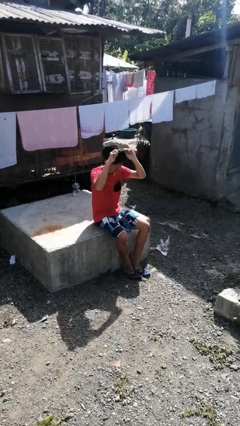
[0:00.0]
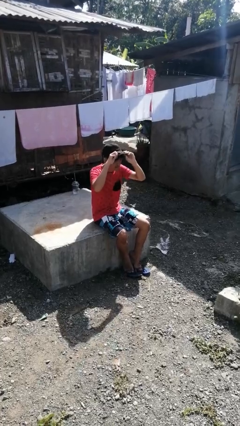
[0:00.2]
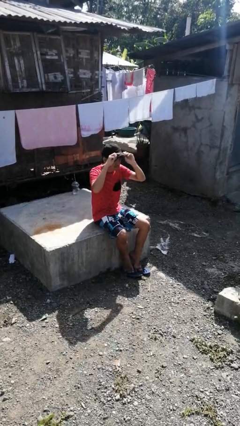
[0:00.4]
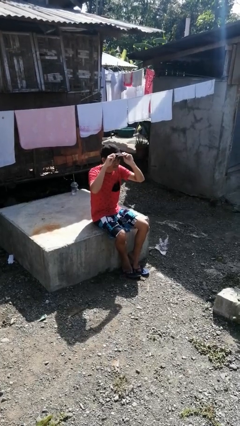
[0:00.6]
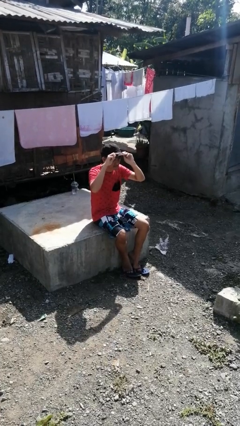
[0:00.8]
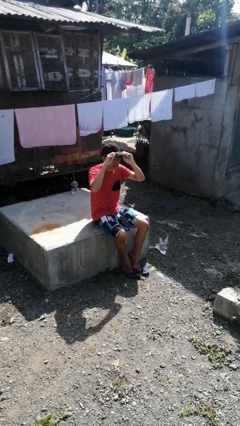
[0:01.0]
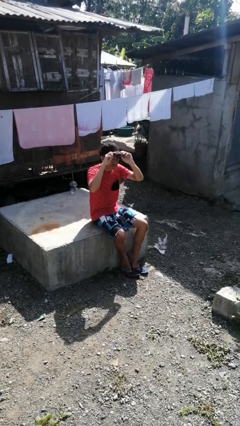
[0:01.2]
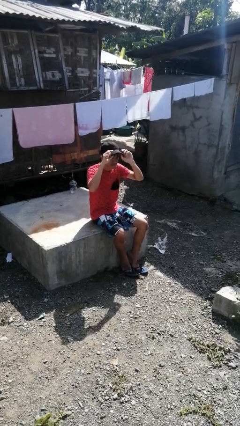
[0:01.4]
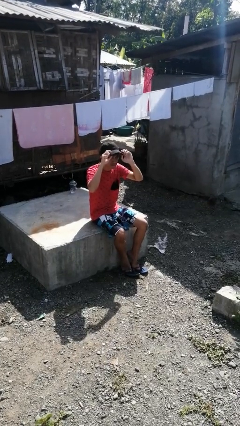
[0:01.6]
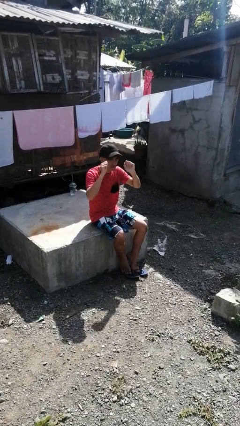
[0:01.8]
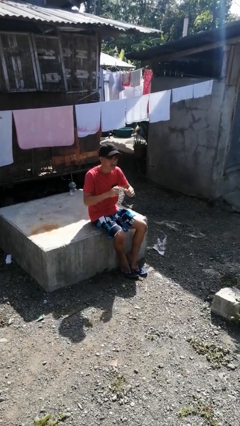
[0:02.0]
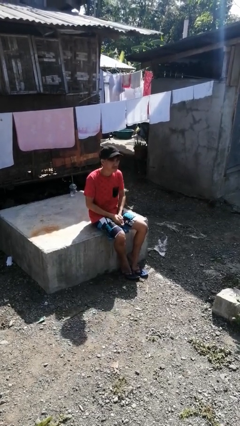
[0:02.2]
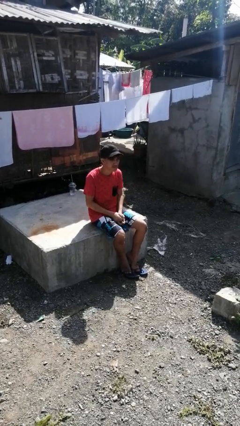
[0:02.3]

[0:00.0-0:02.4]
person puts on hat

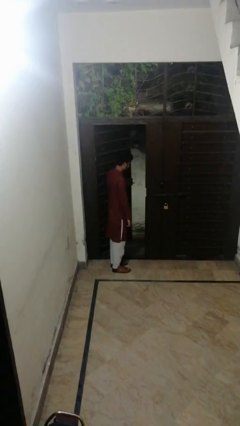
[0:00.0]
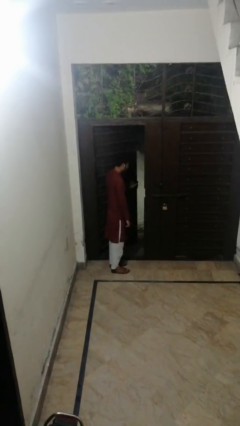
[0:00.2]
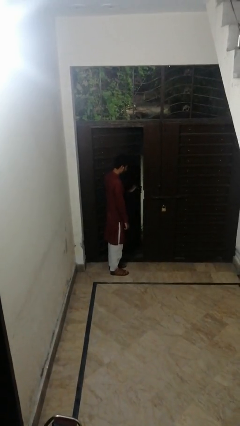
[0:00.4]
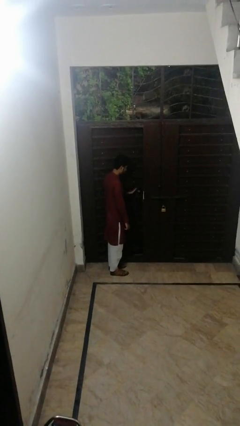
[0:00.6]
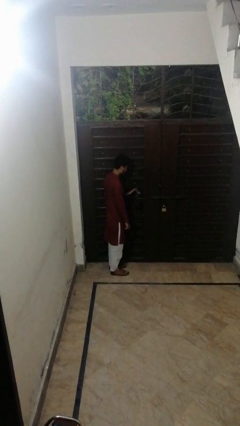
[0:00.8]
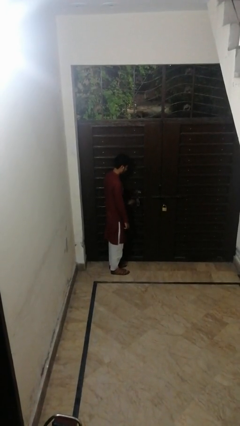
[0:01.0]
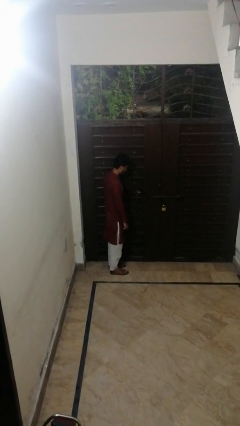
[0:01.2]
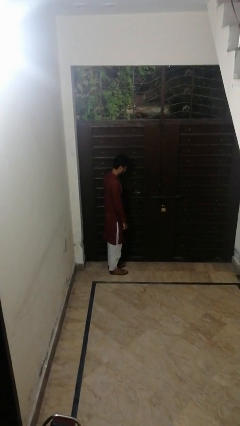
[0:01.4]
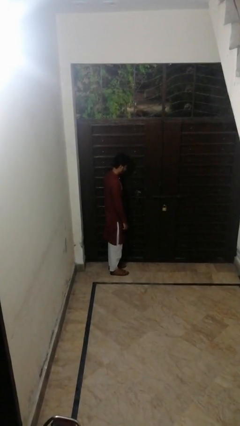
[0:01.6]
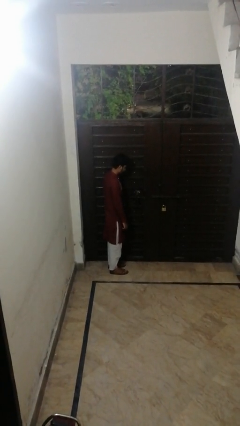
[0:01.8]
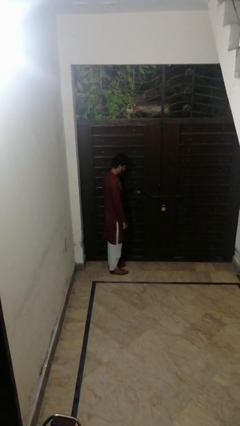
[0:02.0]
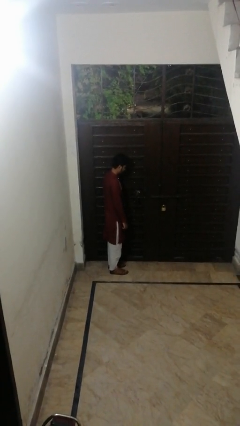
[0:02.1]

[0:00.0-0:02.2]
person closes facility door

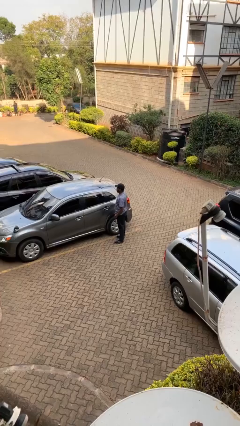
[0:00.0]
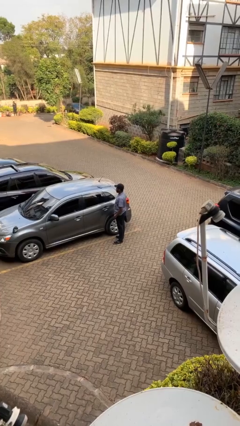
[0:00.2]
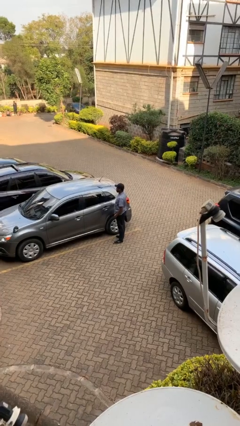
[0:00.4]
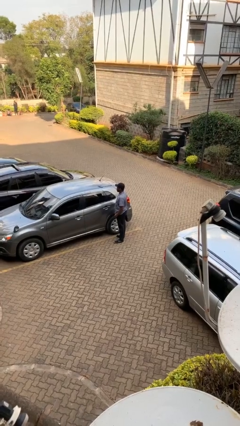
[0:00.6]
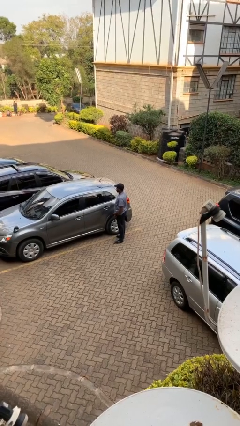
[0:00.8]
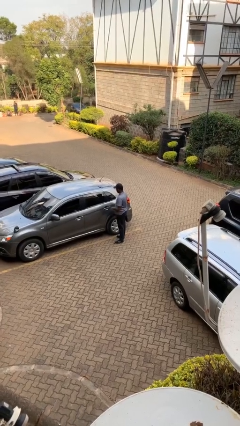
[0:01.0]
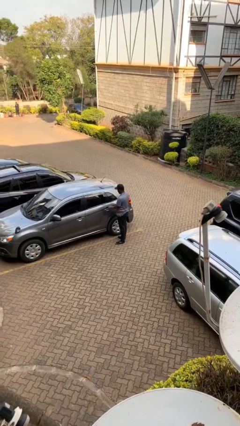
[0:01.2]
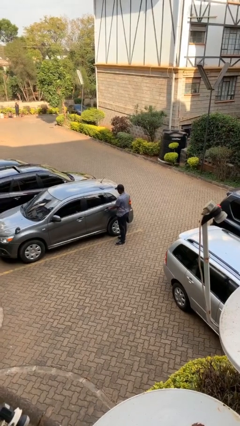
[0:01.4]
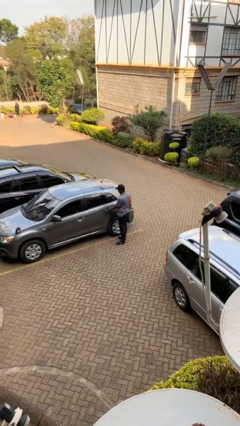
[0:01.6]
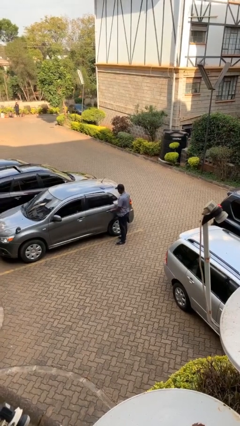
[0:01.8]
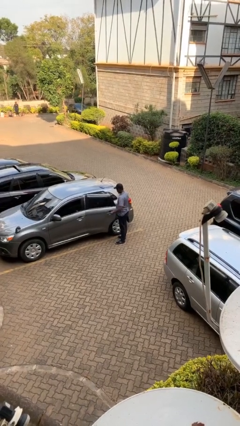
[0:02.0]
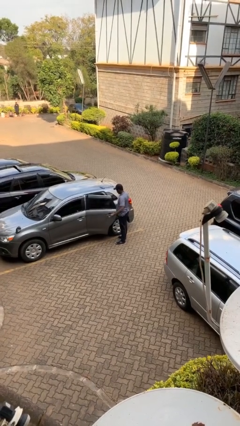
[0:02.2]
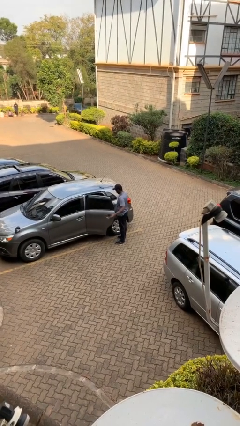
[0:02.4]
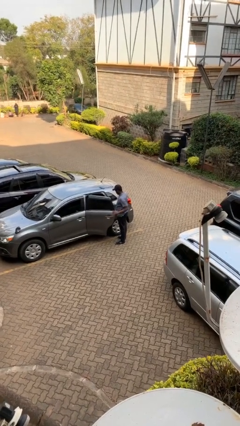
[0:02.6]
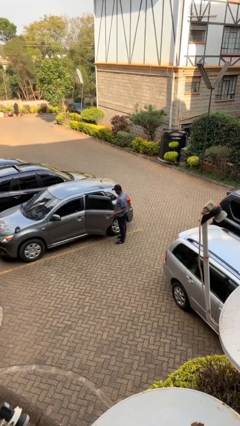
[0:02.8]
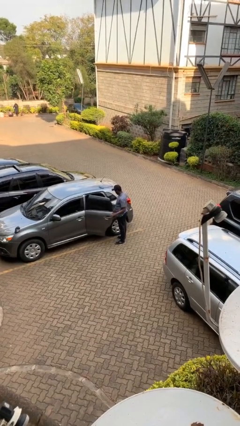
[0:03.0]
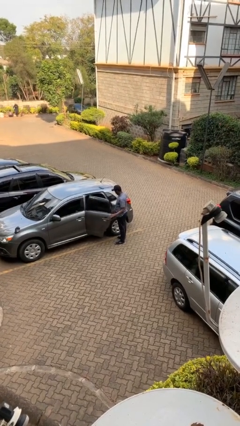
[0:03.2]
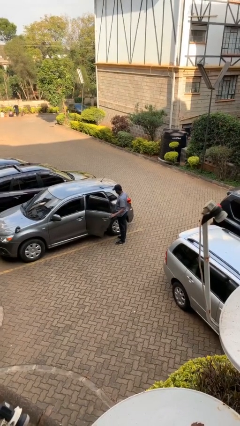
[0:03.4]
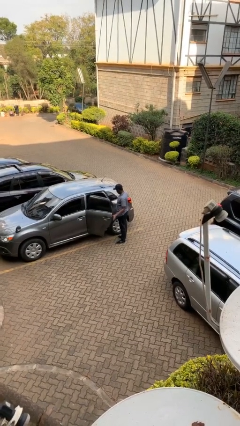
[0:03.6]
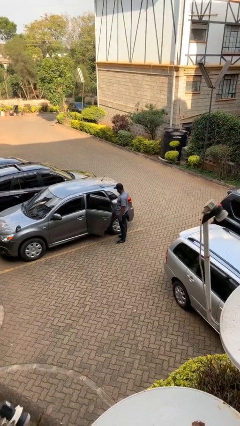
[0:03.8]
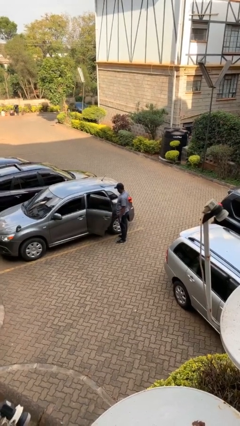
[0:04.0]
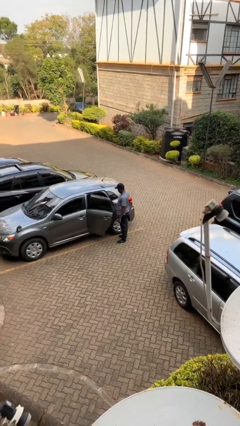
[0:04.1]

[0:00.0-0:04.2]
person opens car door

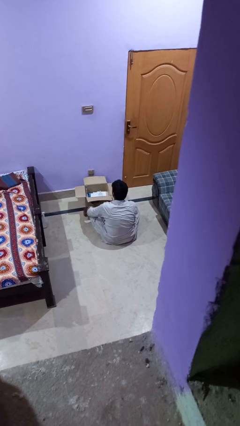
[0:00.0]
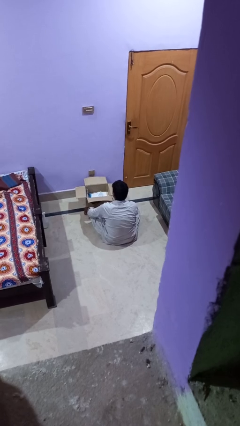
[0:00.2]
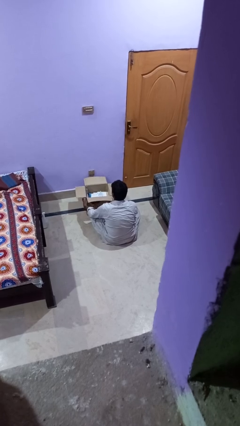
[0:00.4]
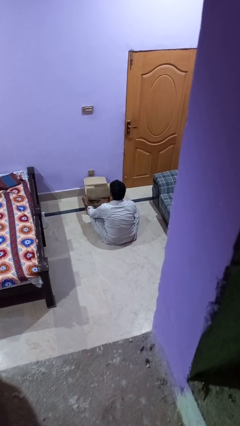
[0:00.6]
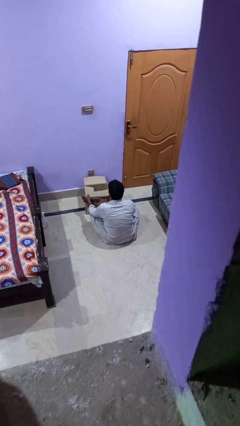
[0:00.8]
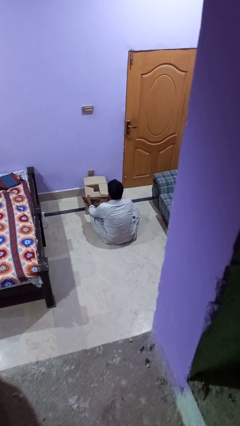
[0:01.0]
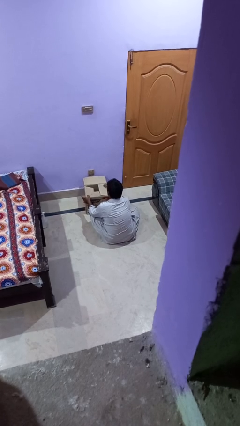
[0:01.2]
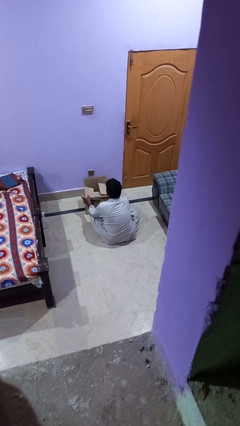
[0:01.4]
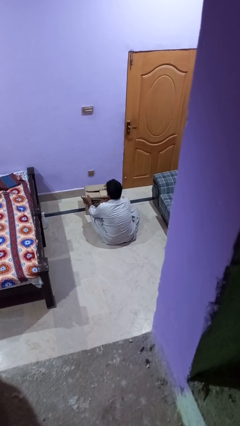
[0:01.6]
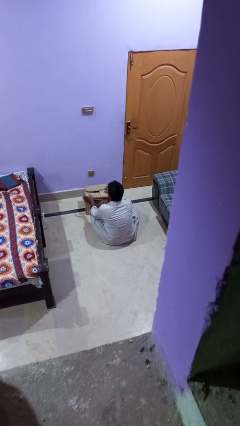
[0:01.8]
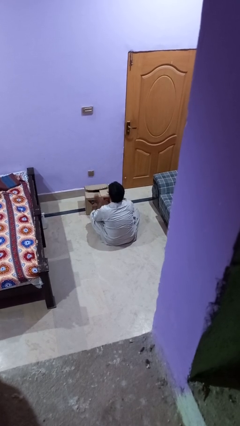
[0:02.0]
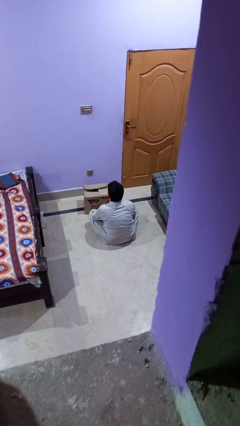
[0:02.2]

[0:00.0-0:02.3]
person closes box

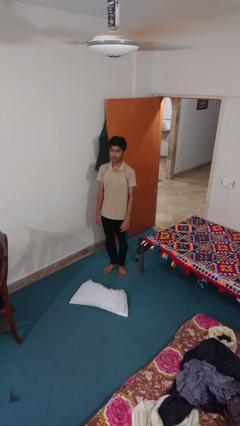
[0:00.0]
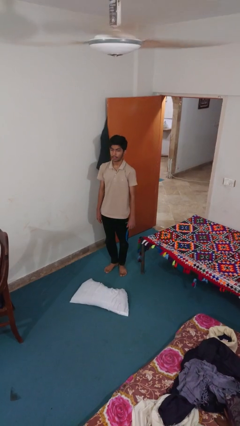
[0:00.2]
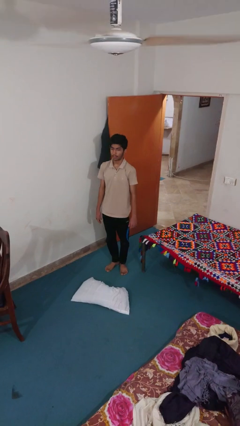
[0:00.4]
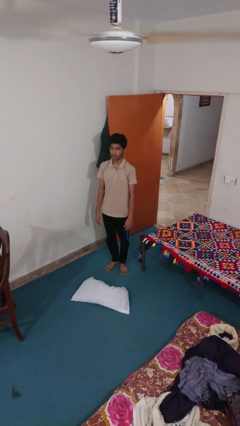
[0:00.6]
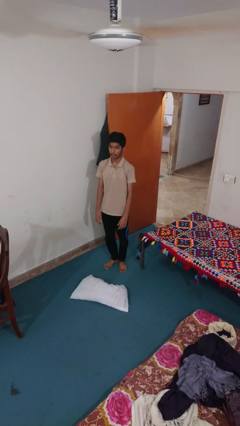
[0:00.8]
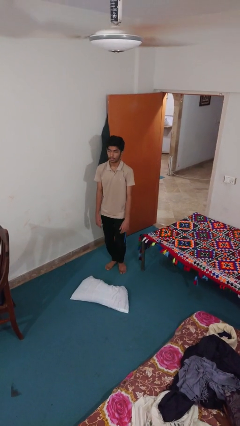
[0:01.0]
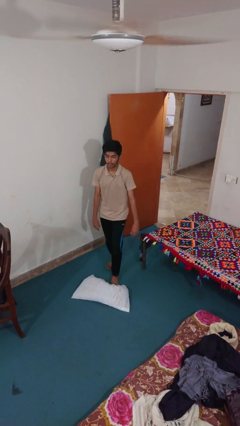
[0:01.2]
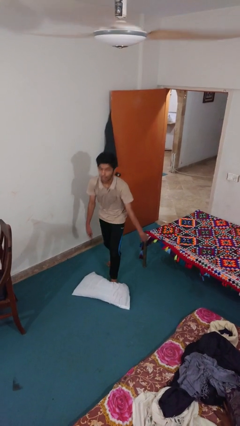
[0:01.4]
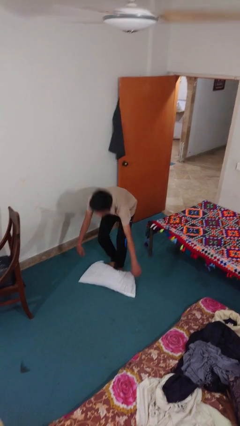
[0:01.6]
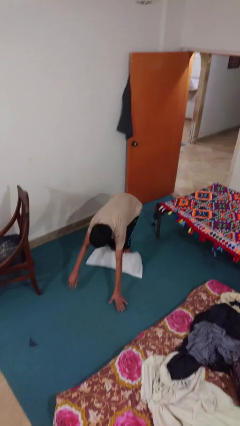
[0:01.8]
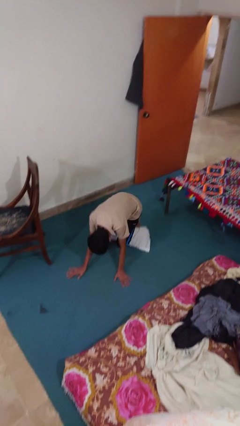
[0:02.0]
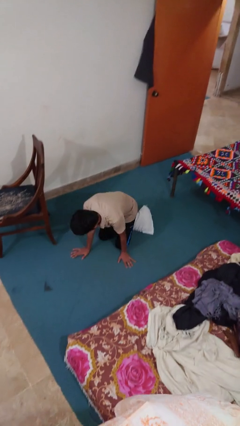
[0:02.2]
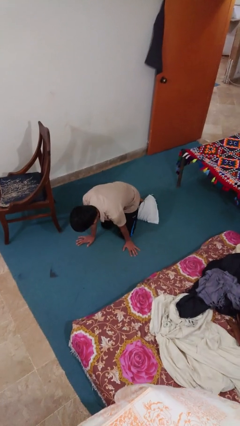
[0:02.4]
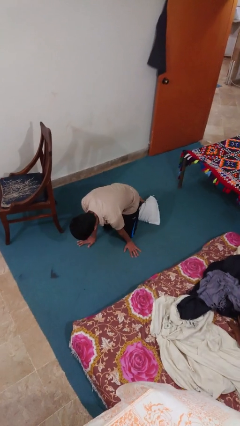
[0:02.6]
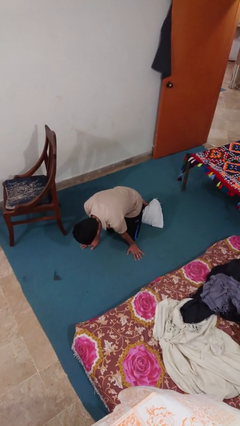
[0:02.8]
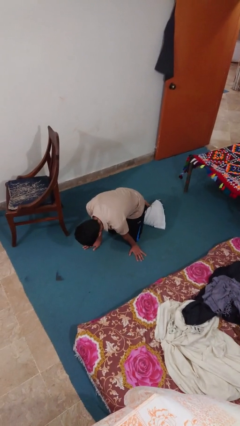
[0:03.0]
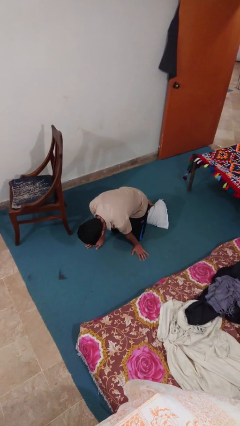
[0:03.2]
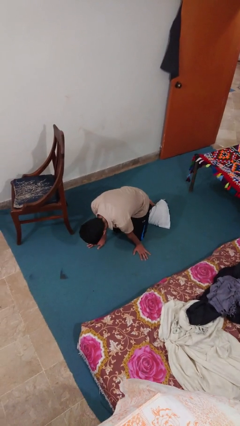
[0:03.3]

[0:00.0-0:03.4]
person trips on object on floor

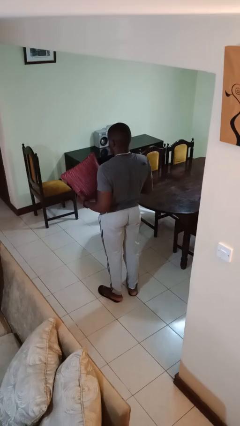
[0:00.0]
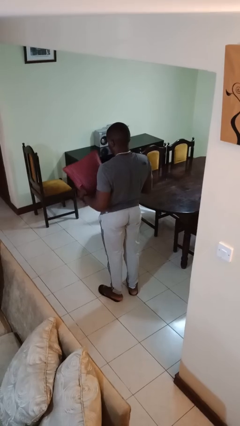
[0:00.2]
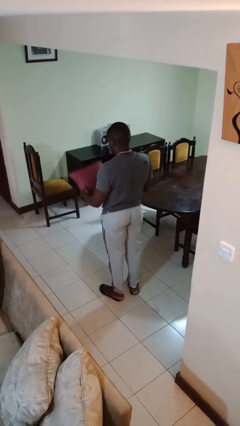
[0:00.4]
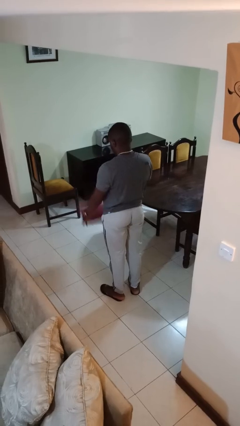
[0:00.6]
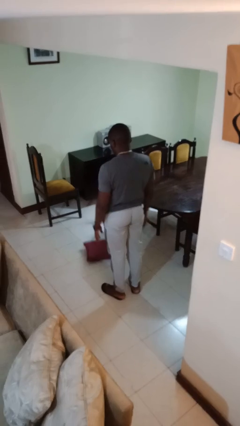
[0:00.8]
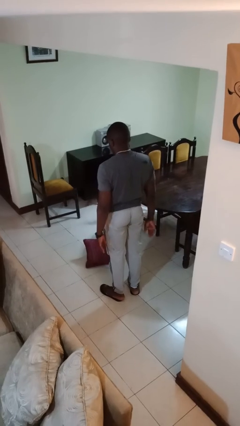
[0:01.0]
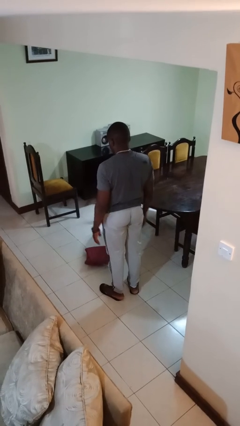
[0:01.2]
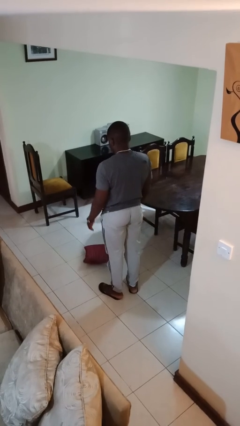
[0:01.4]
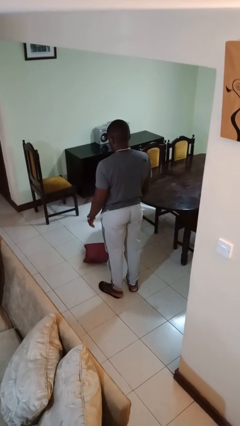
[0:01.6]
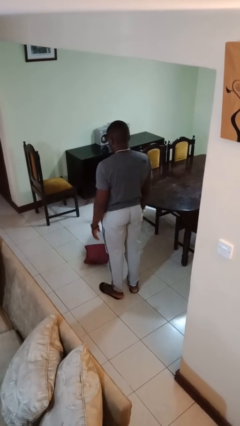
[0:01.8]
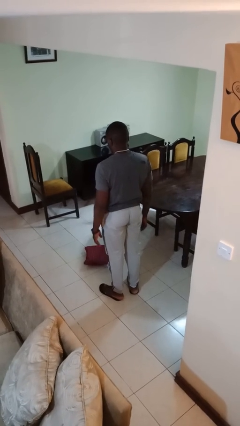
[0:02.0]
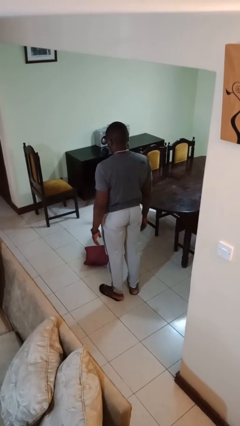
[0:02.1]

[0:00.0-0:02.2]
person throws object to ground

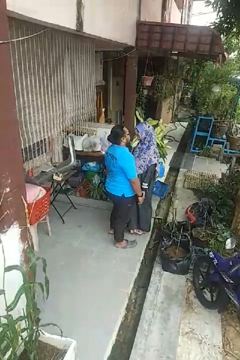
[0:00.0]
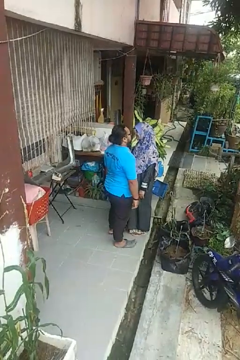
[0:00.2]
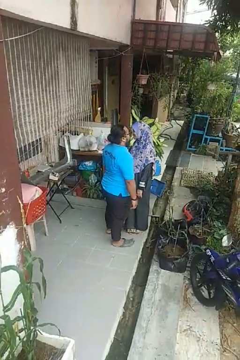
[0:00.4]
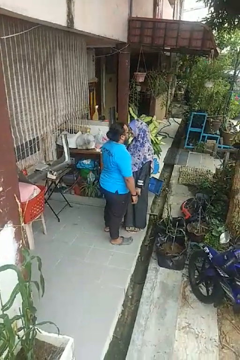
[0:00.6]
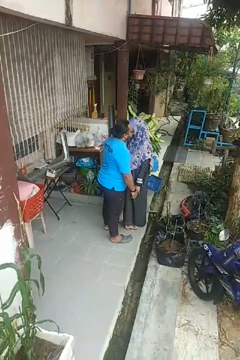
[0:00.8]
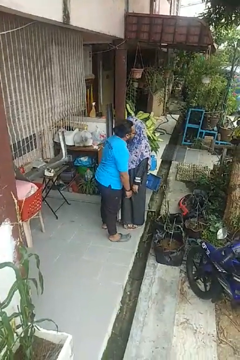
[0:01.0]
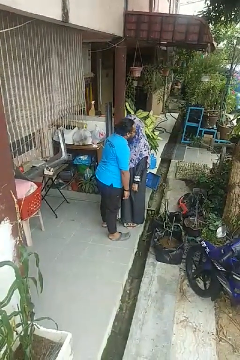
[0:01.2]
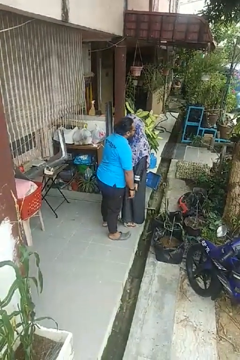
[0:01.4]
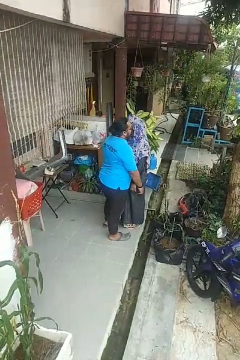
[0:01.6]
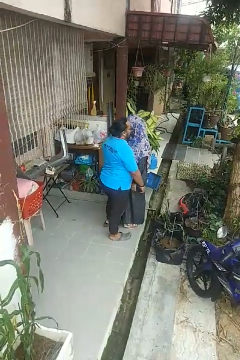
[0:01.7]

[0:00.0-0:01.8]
person kisses cheek of person
